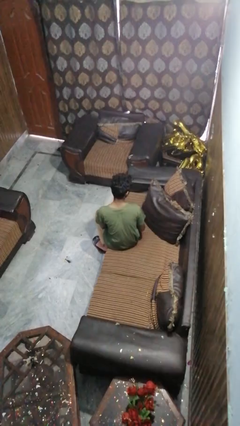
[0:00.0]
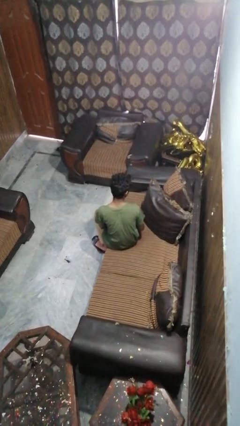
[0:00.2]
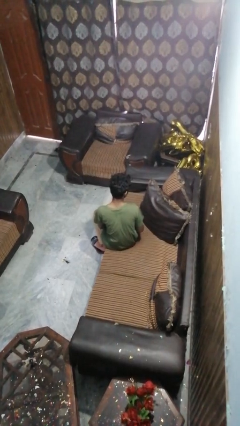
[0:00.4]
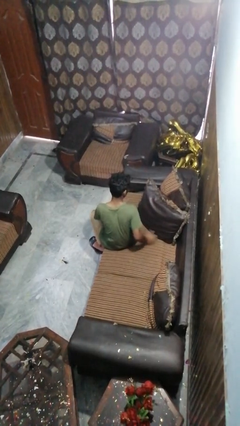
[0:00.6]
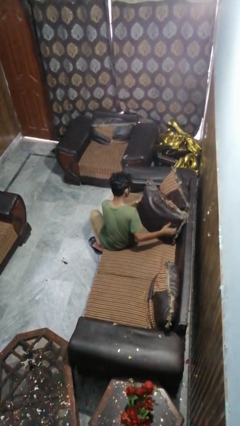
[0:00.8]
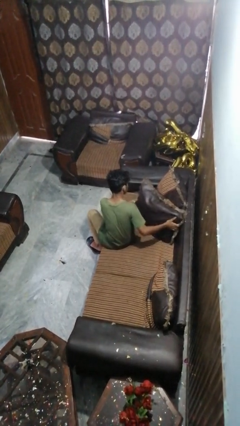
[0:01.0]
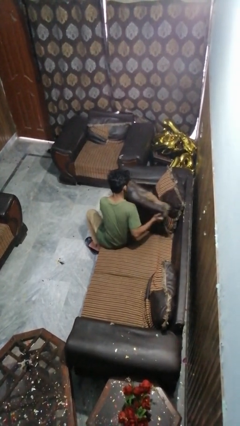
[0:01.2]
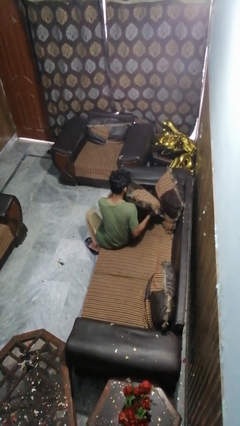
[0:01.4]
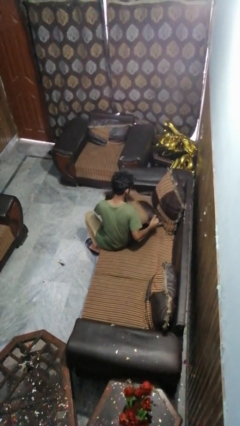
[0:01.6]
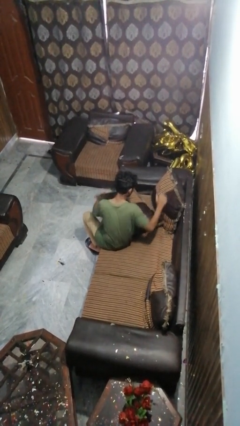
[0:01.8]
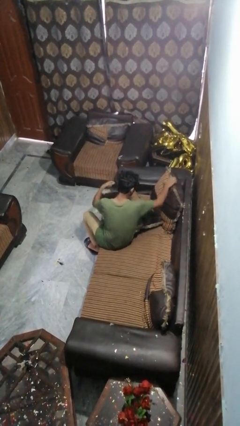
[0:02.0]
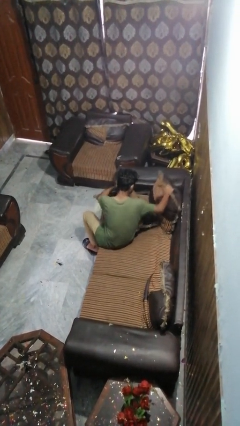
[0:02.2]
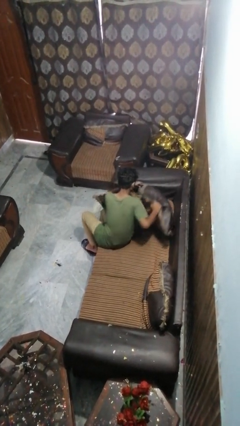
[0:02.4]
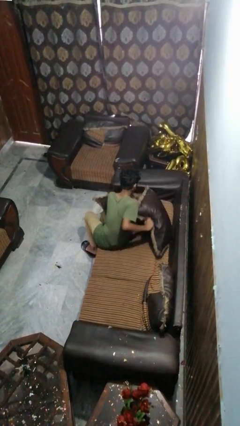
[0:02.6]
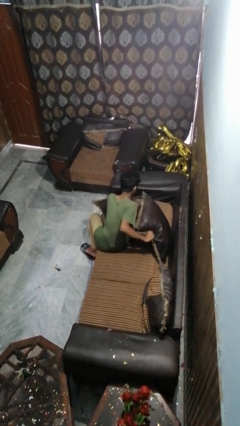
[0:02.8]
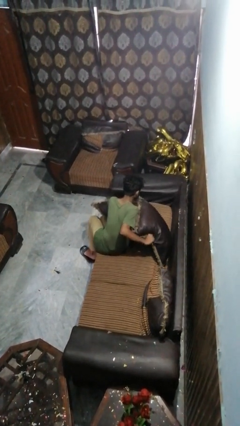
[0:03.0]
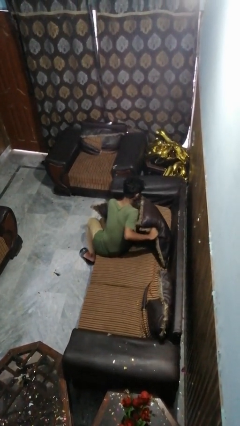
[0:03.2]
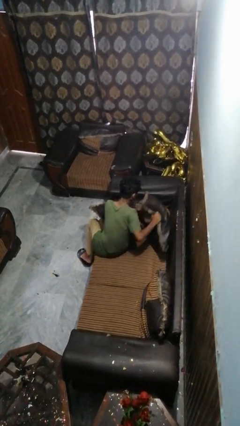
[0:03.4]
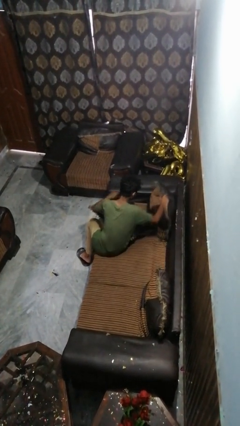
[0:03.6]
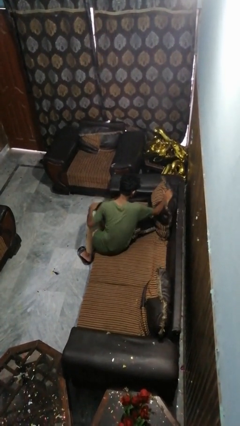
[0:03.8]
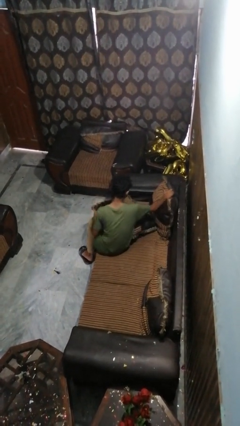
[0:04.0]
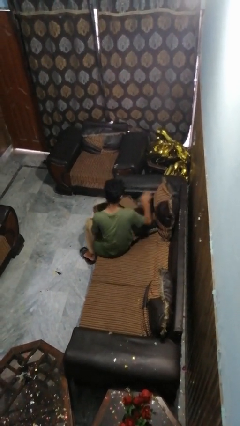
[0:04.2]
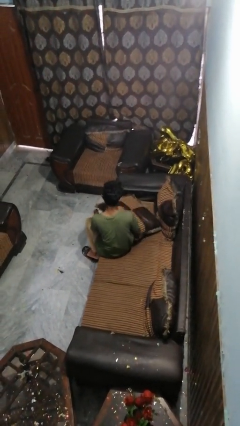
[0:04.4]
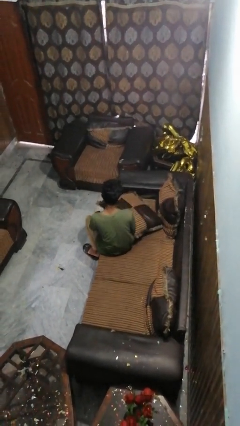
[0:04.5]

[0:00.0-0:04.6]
person searches in couch

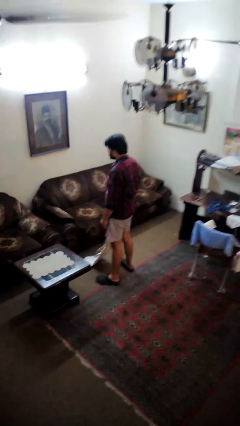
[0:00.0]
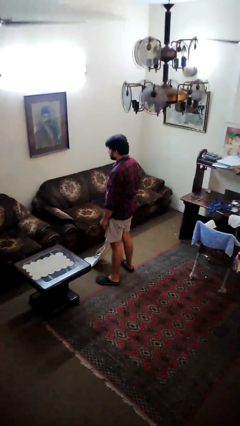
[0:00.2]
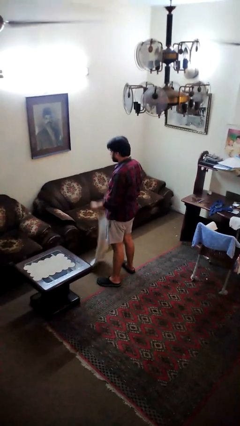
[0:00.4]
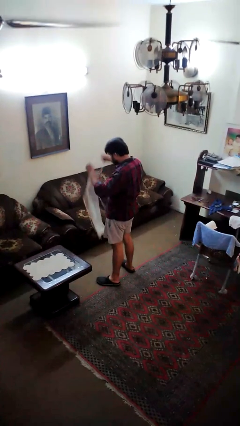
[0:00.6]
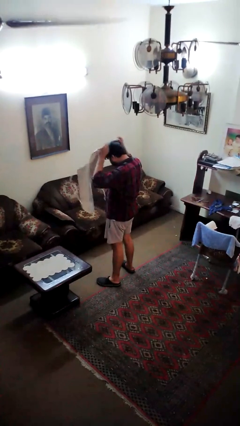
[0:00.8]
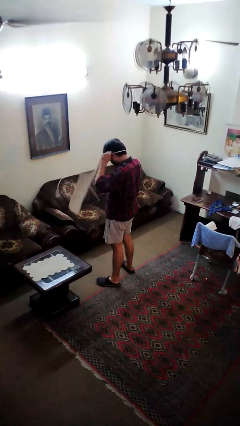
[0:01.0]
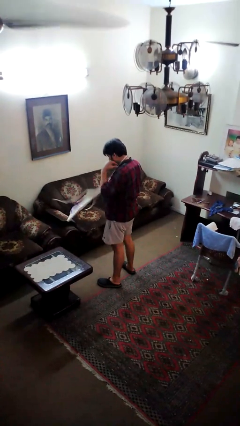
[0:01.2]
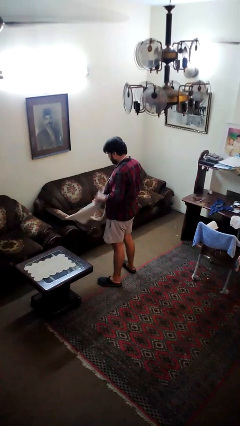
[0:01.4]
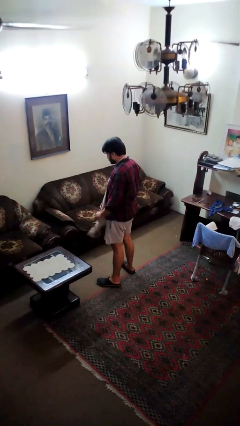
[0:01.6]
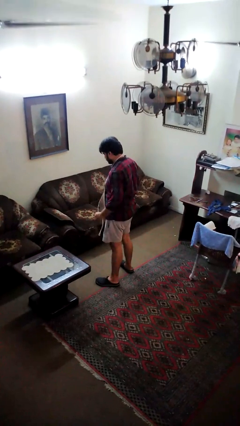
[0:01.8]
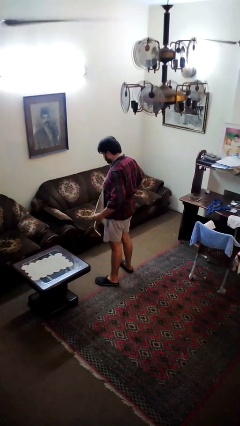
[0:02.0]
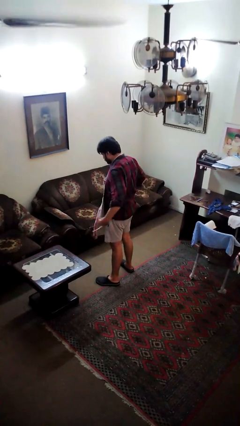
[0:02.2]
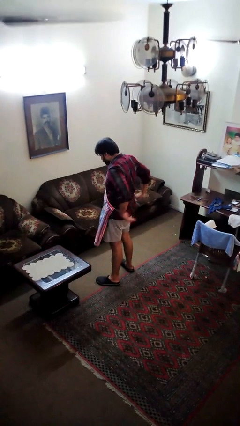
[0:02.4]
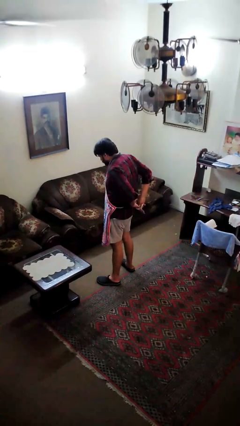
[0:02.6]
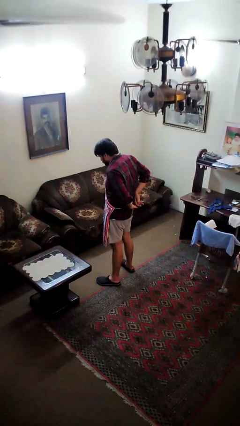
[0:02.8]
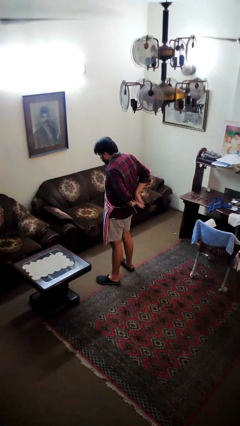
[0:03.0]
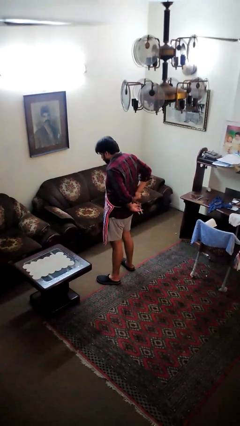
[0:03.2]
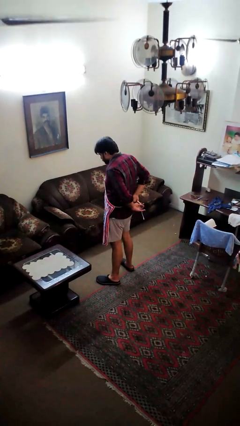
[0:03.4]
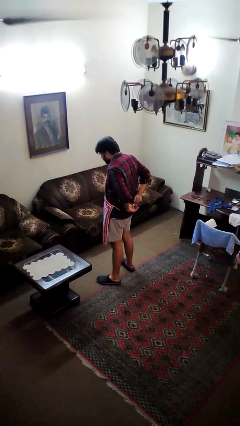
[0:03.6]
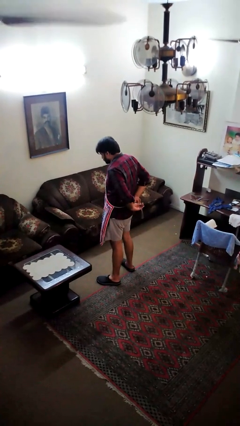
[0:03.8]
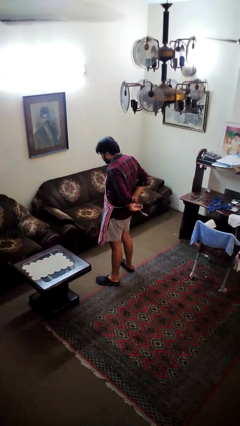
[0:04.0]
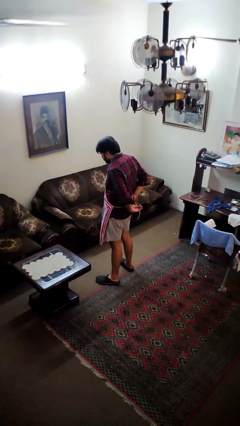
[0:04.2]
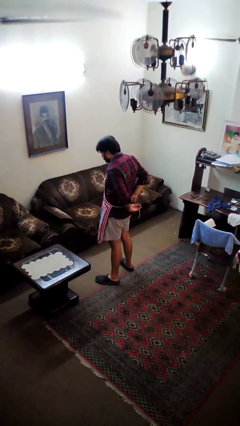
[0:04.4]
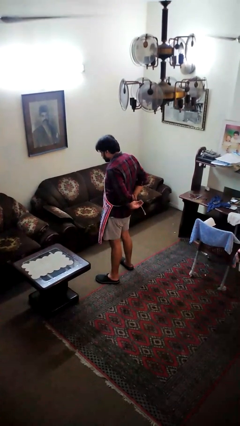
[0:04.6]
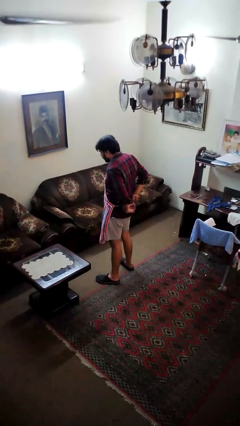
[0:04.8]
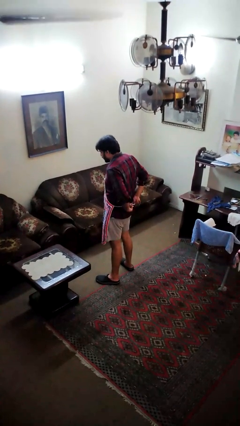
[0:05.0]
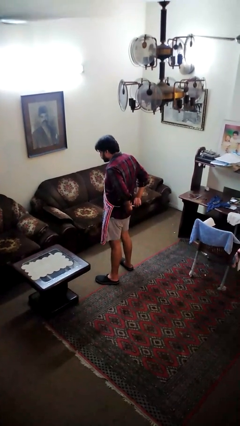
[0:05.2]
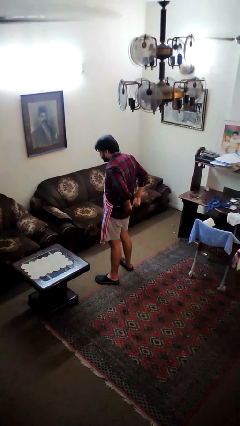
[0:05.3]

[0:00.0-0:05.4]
person puts on apron

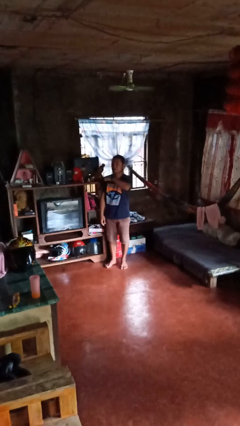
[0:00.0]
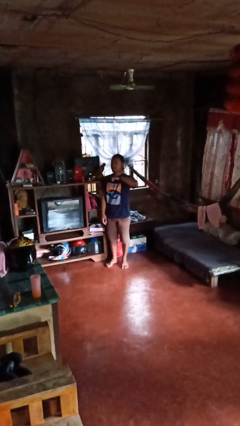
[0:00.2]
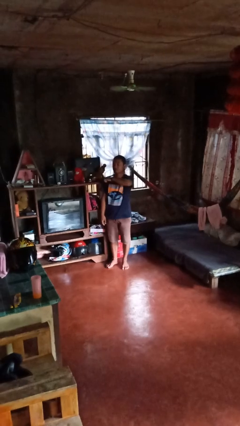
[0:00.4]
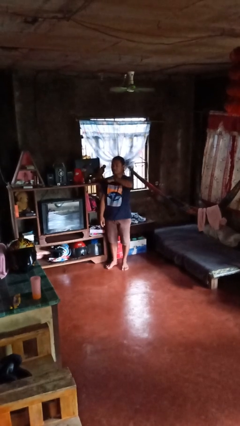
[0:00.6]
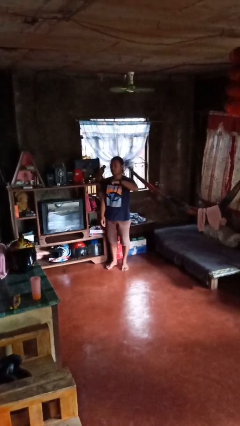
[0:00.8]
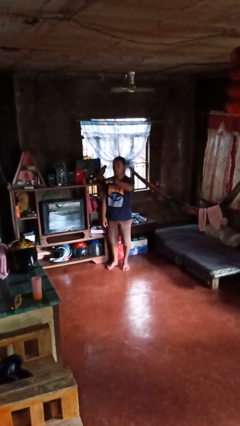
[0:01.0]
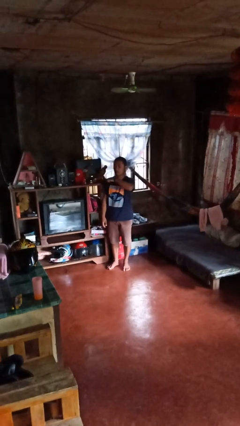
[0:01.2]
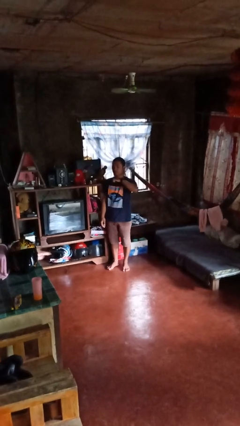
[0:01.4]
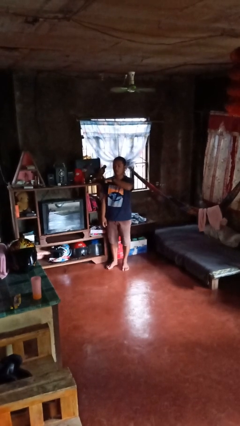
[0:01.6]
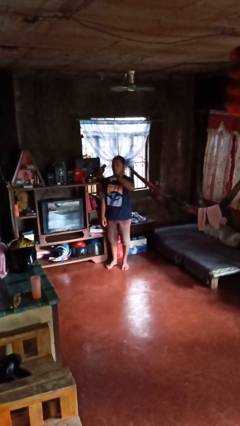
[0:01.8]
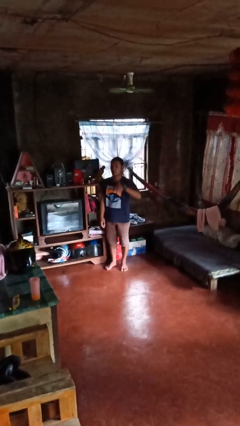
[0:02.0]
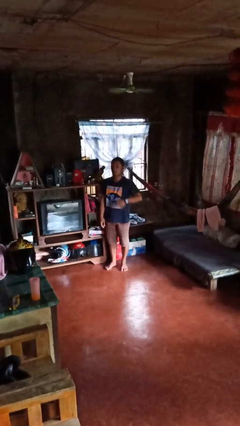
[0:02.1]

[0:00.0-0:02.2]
person gestures cut

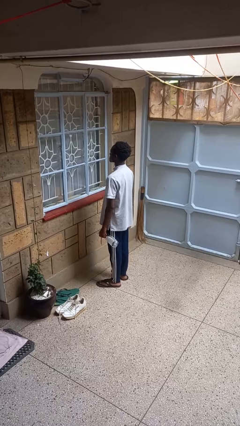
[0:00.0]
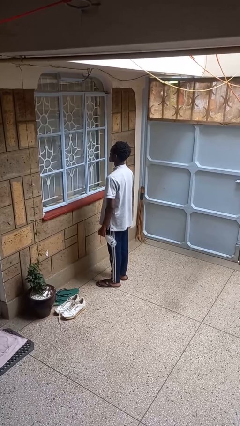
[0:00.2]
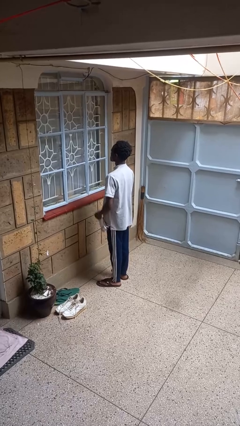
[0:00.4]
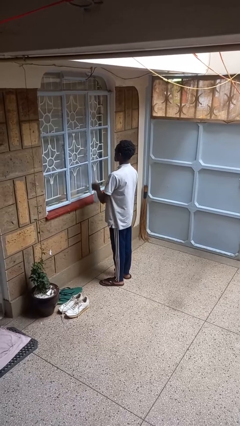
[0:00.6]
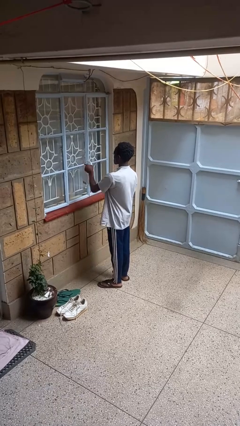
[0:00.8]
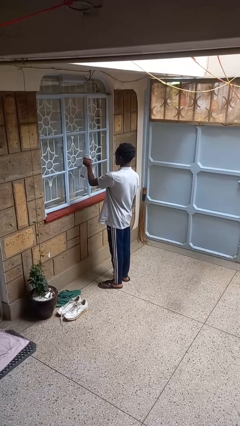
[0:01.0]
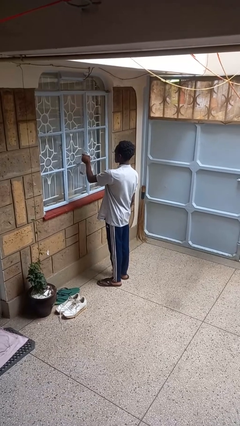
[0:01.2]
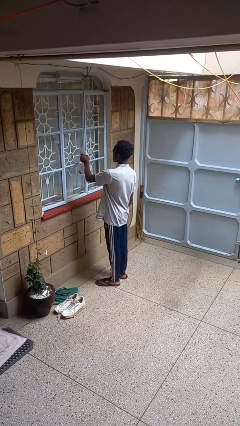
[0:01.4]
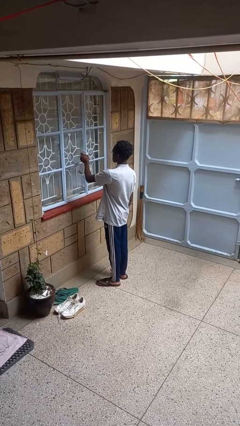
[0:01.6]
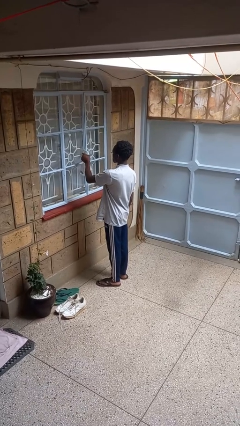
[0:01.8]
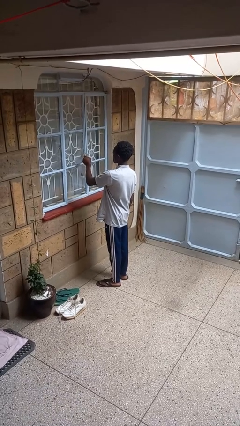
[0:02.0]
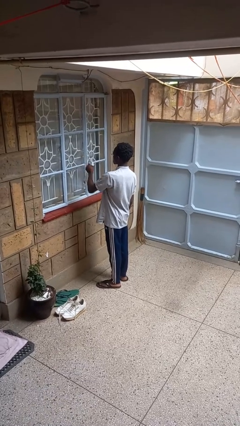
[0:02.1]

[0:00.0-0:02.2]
person sprays from bottle

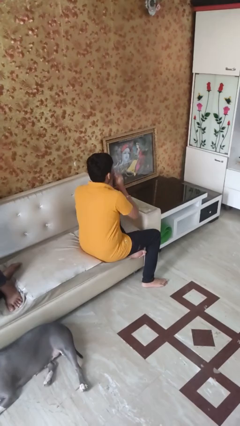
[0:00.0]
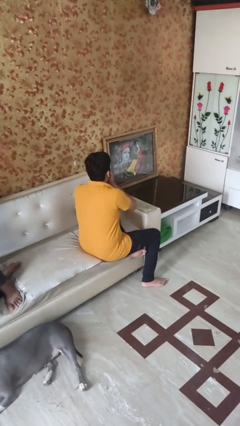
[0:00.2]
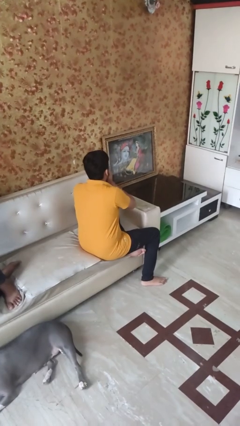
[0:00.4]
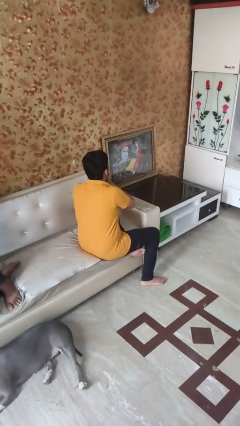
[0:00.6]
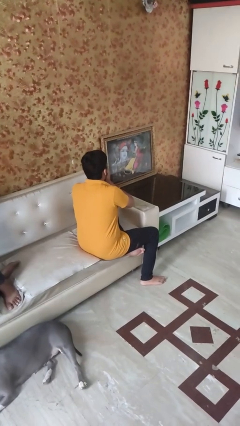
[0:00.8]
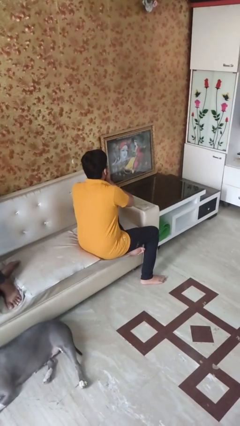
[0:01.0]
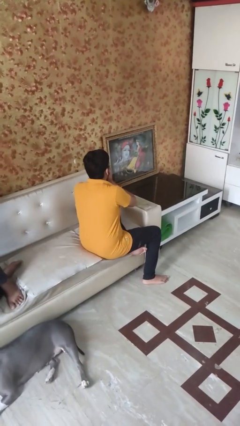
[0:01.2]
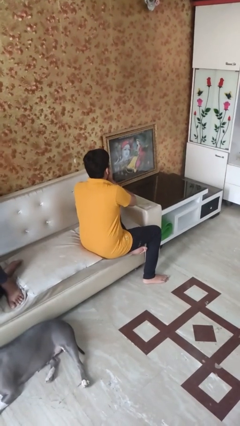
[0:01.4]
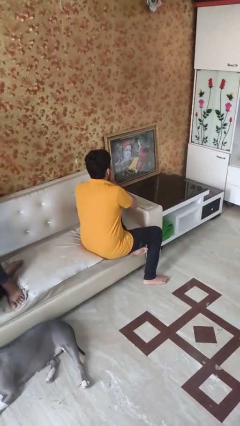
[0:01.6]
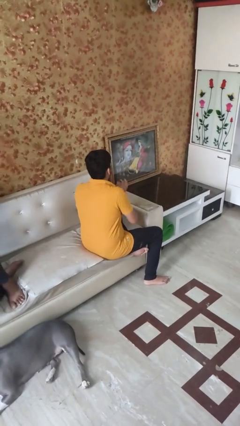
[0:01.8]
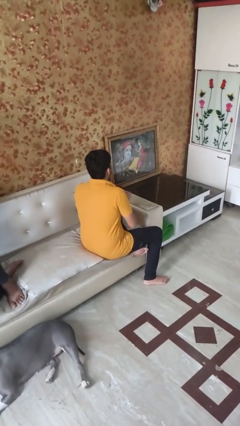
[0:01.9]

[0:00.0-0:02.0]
person yawns

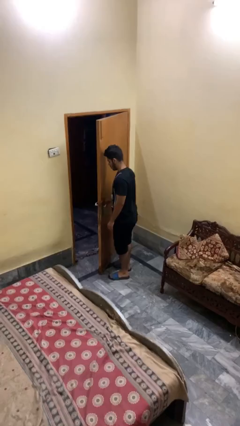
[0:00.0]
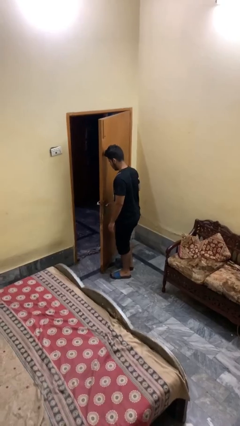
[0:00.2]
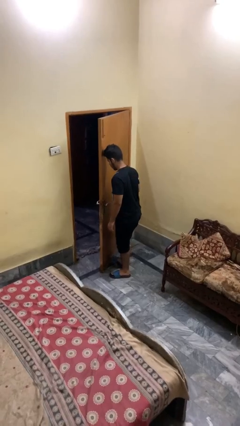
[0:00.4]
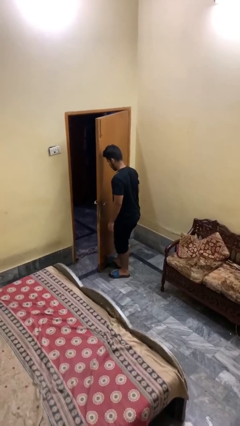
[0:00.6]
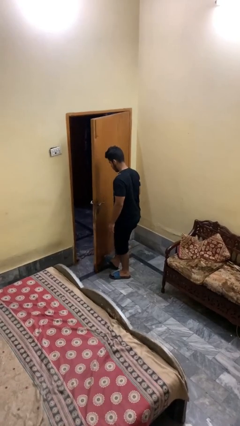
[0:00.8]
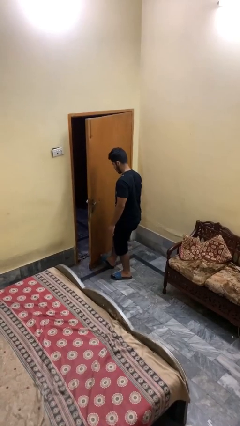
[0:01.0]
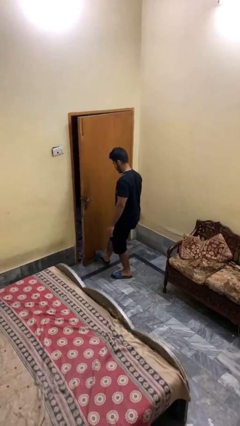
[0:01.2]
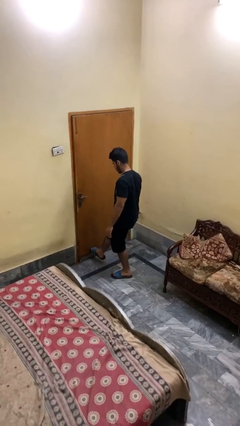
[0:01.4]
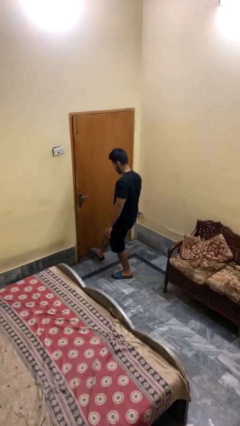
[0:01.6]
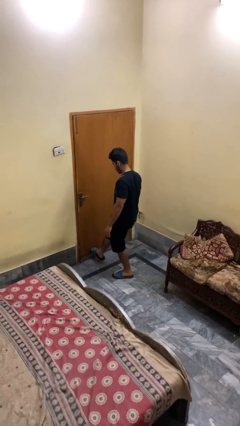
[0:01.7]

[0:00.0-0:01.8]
person closes door with foot
